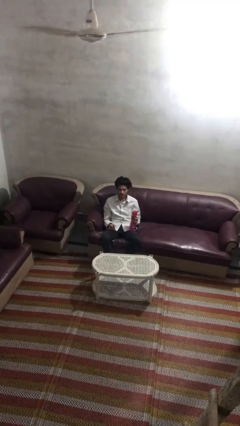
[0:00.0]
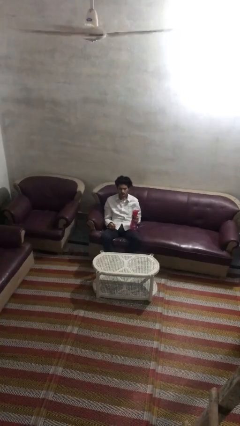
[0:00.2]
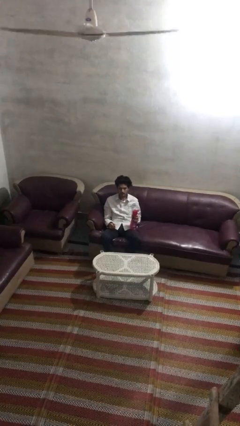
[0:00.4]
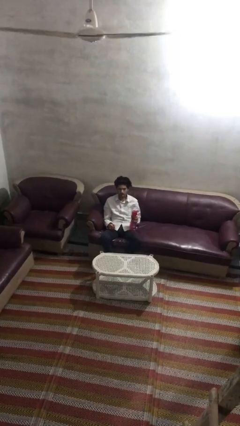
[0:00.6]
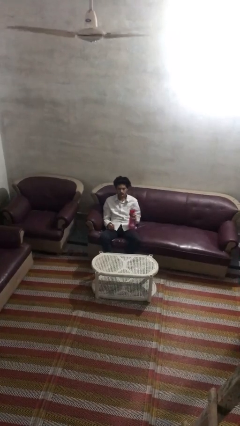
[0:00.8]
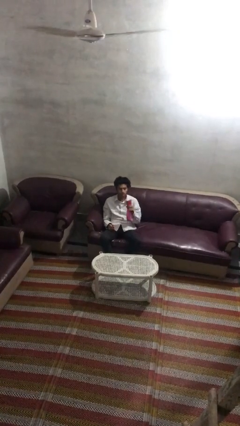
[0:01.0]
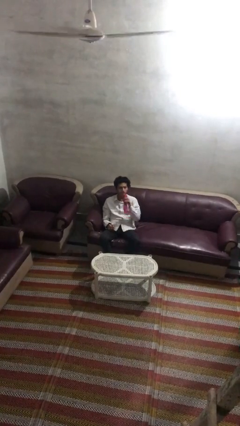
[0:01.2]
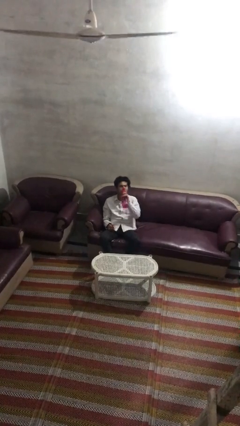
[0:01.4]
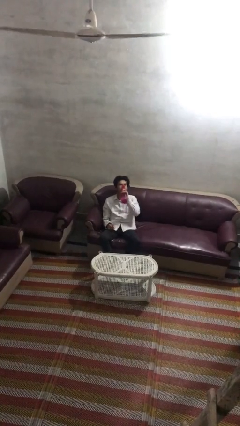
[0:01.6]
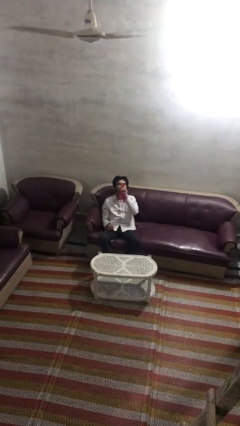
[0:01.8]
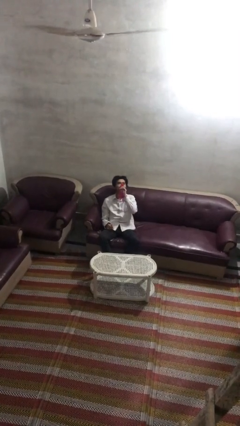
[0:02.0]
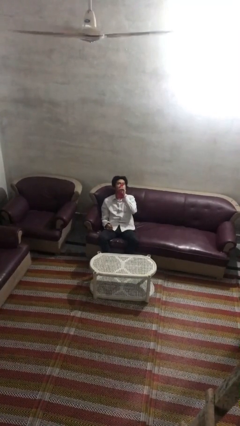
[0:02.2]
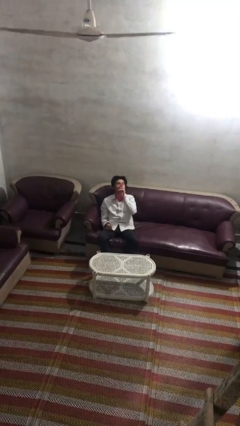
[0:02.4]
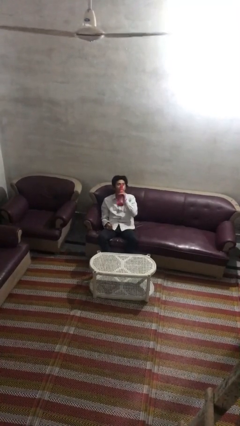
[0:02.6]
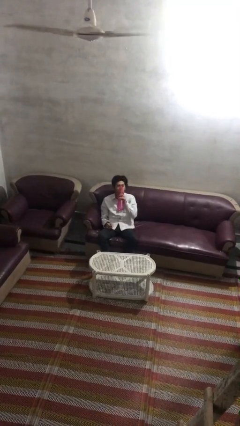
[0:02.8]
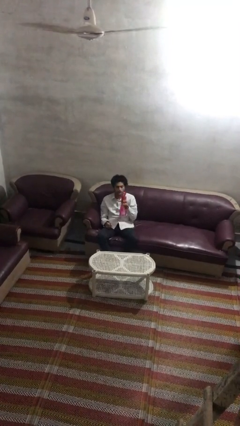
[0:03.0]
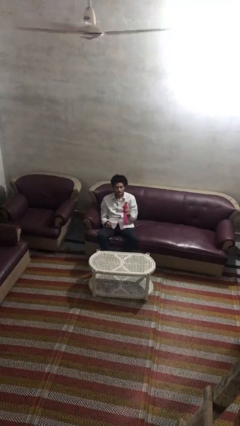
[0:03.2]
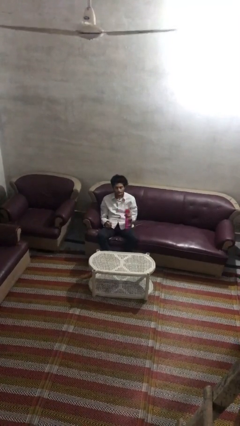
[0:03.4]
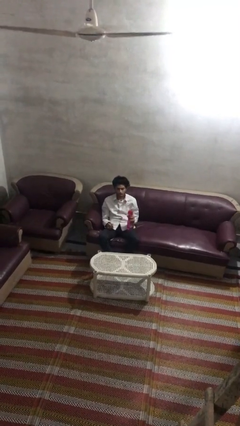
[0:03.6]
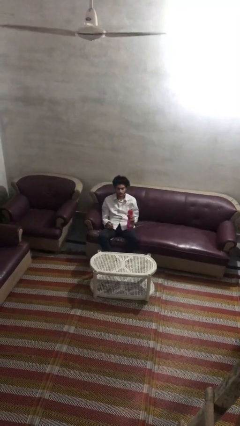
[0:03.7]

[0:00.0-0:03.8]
person drinks from bottle

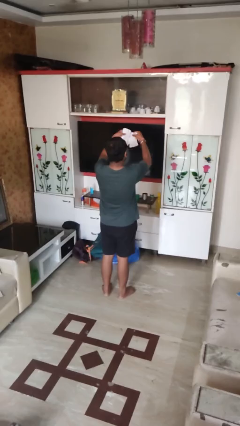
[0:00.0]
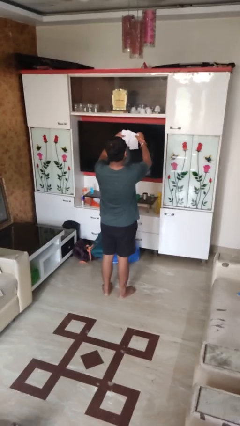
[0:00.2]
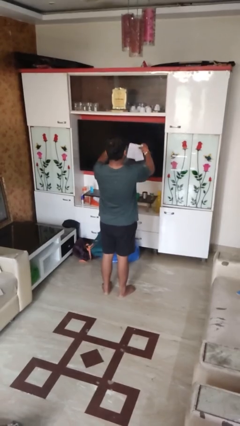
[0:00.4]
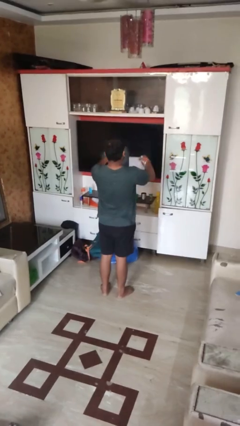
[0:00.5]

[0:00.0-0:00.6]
person tears paper

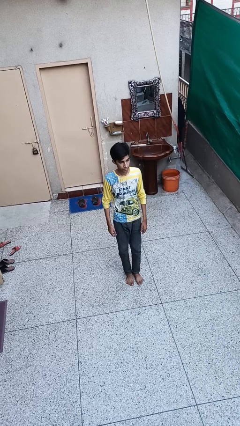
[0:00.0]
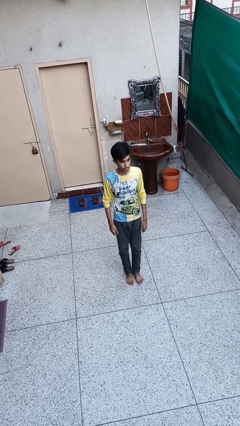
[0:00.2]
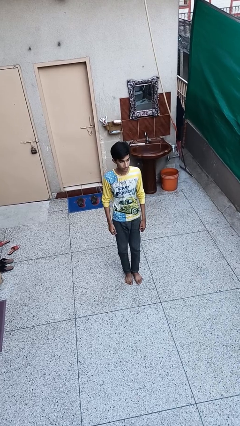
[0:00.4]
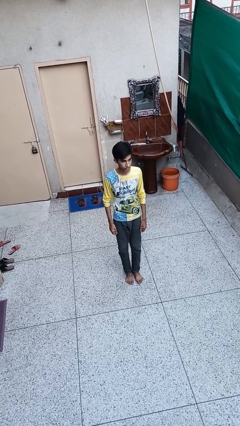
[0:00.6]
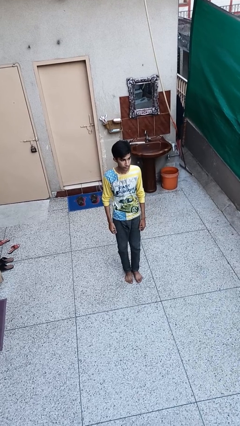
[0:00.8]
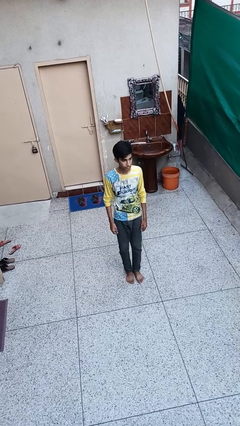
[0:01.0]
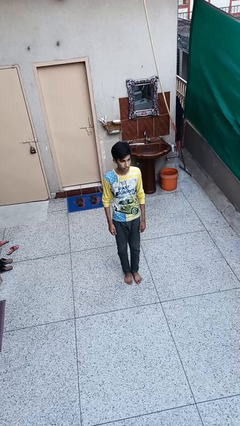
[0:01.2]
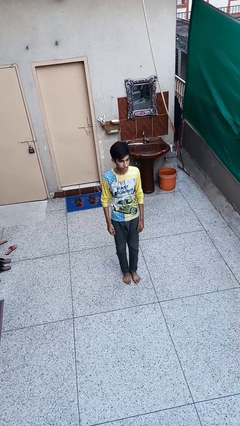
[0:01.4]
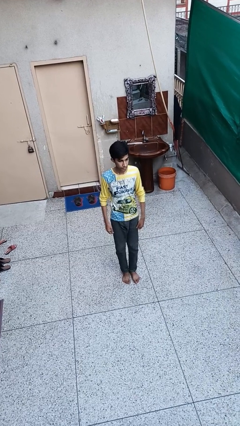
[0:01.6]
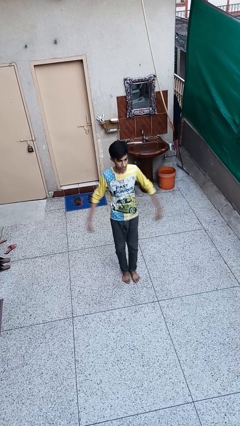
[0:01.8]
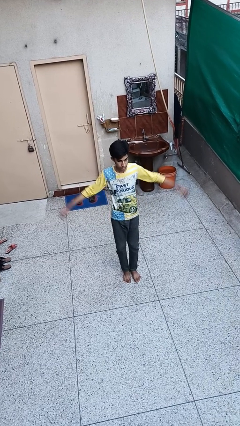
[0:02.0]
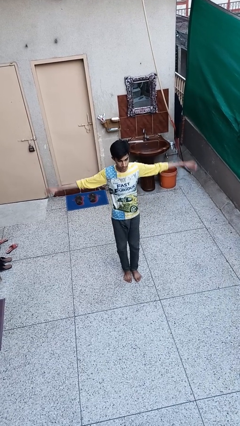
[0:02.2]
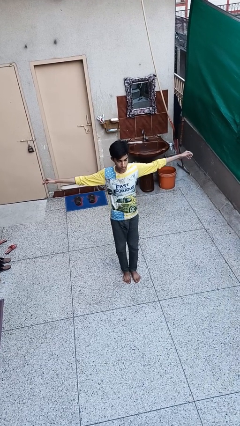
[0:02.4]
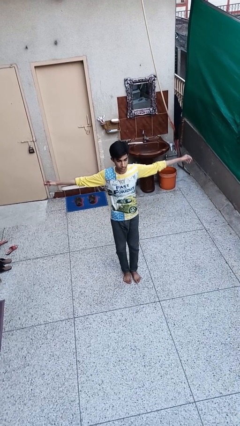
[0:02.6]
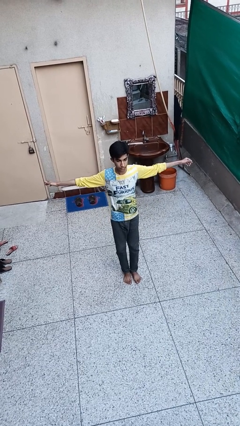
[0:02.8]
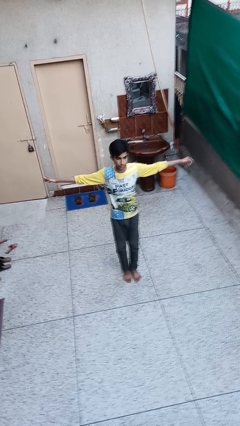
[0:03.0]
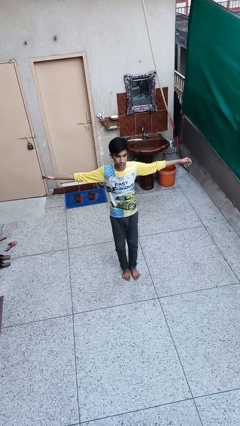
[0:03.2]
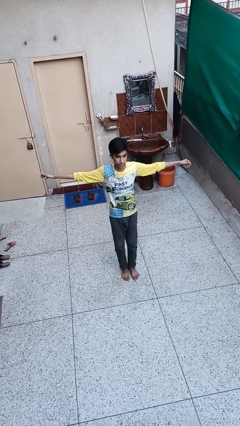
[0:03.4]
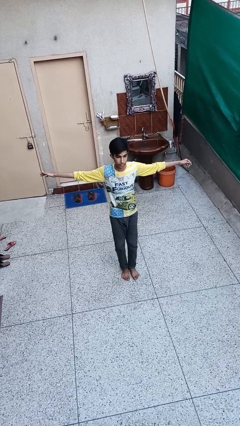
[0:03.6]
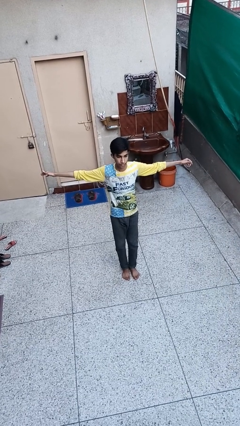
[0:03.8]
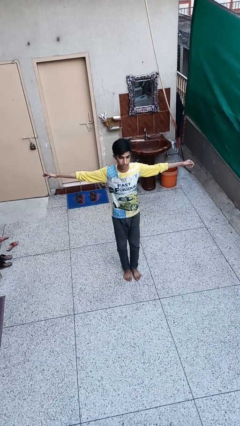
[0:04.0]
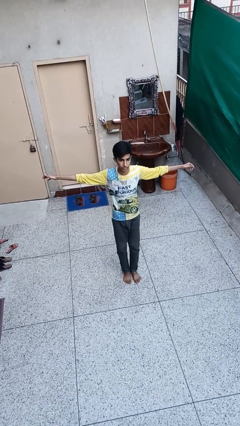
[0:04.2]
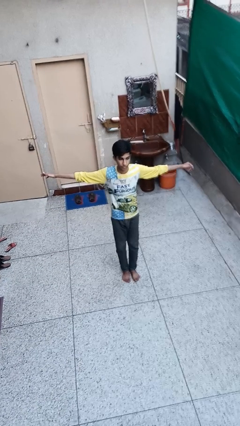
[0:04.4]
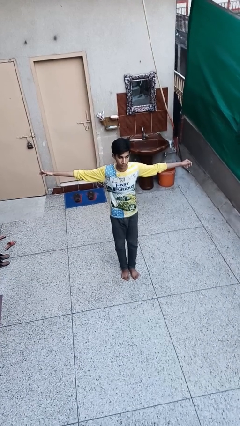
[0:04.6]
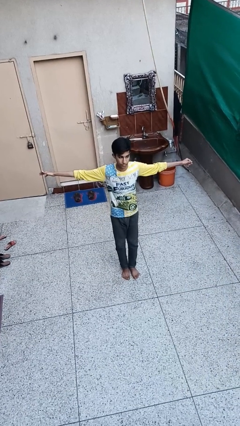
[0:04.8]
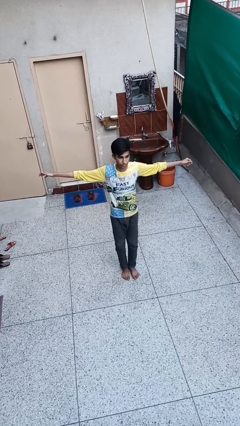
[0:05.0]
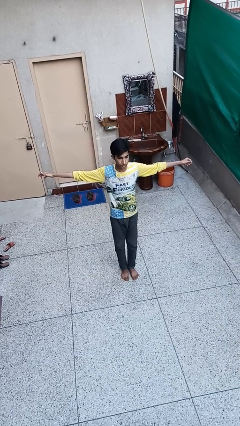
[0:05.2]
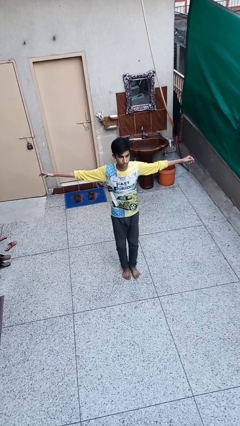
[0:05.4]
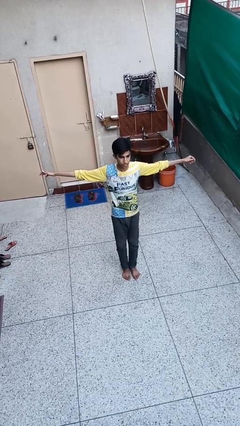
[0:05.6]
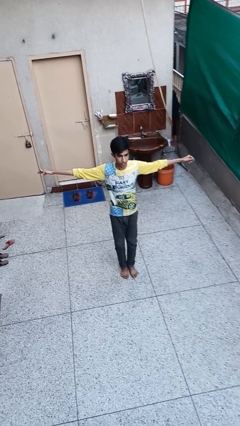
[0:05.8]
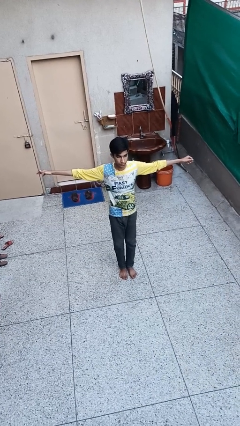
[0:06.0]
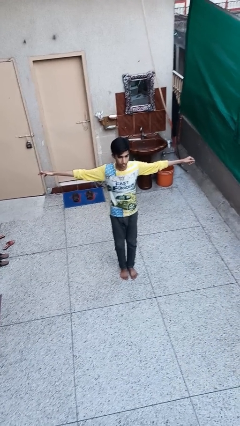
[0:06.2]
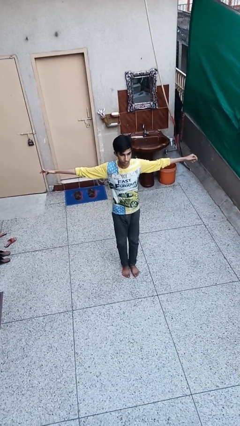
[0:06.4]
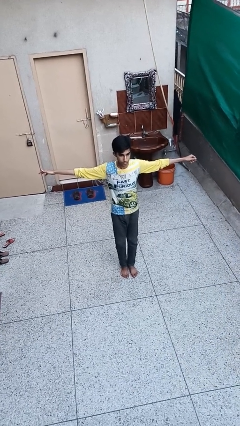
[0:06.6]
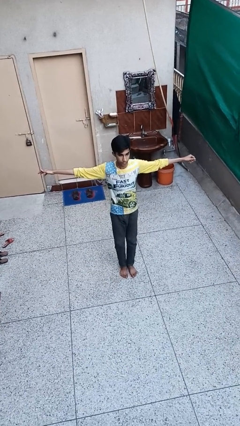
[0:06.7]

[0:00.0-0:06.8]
person stretches arms to side

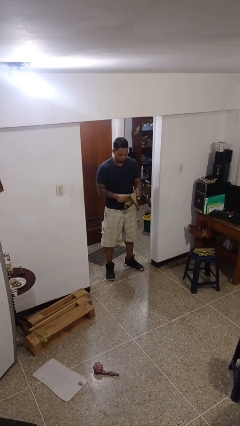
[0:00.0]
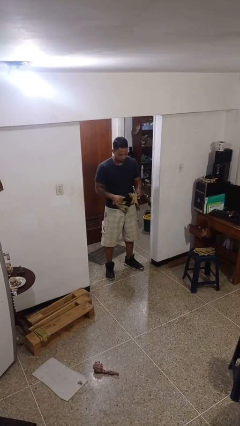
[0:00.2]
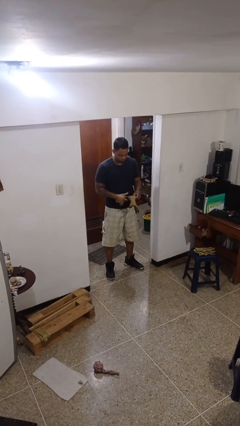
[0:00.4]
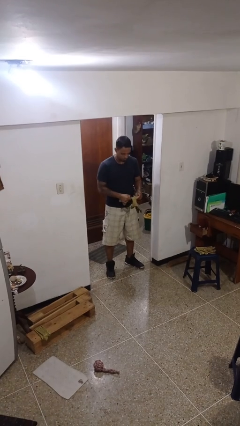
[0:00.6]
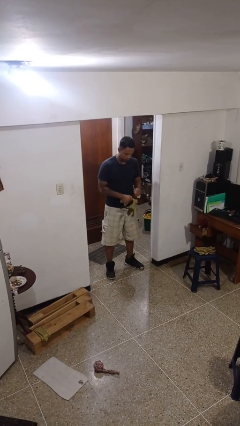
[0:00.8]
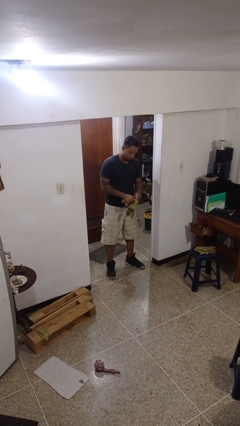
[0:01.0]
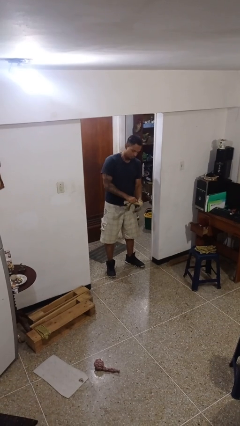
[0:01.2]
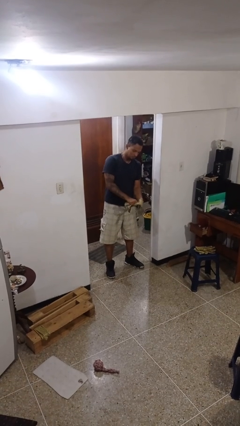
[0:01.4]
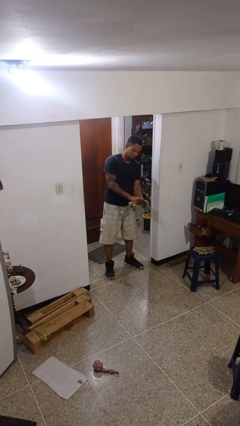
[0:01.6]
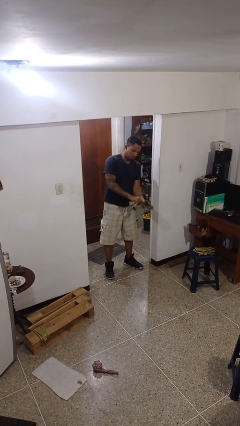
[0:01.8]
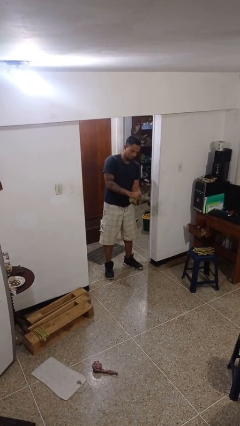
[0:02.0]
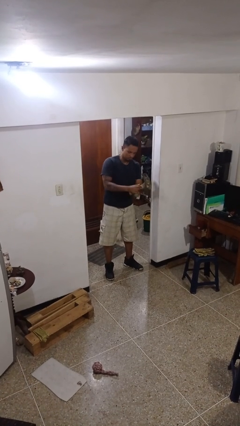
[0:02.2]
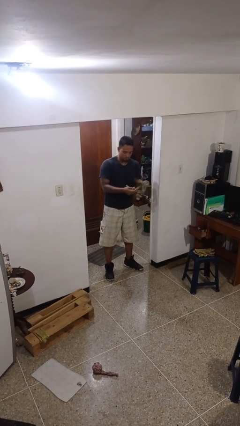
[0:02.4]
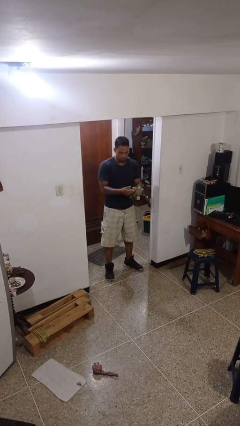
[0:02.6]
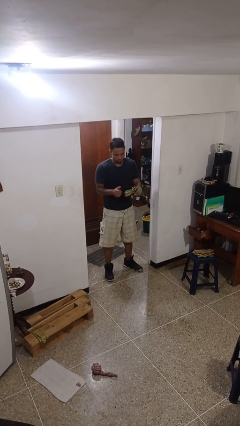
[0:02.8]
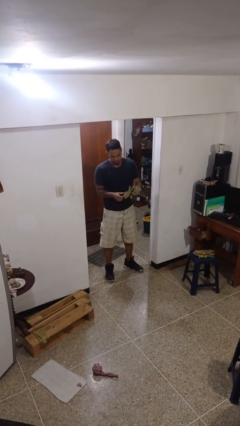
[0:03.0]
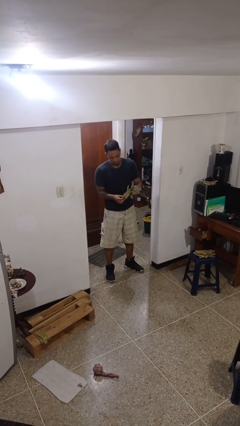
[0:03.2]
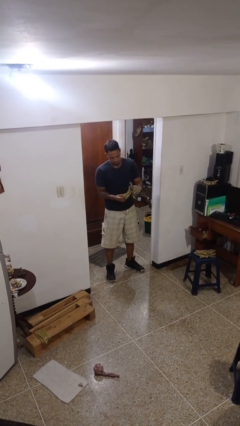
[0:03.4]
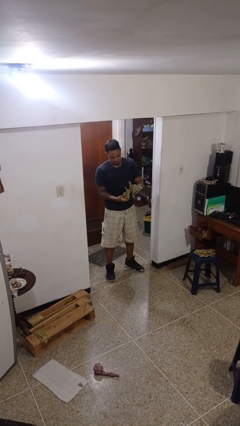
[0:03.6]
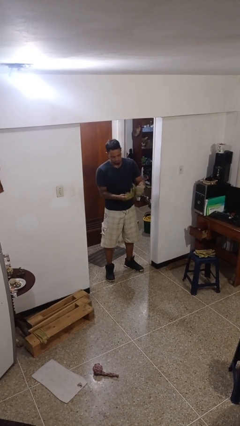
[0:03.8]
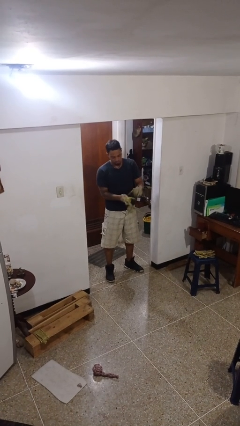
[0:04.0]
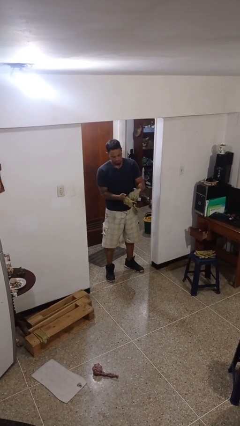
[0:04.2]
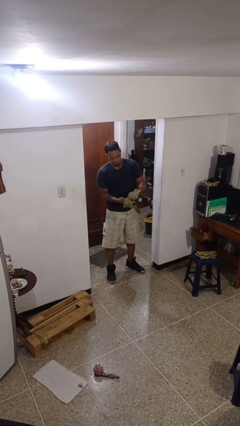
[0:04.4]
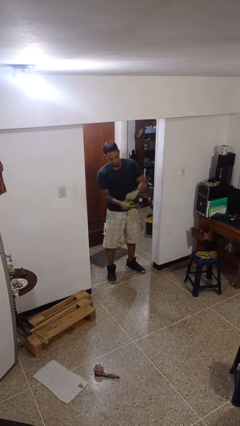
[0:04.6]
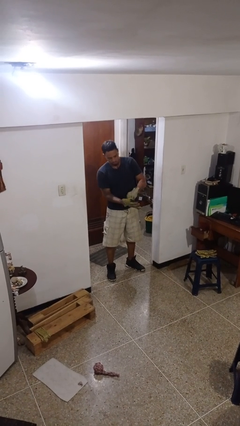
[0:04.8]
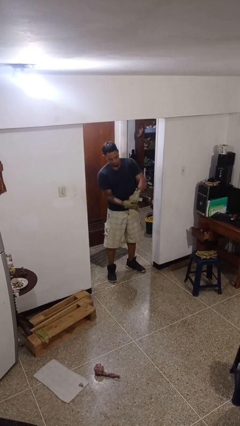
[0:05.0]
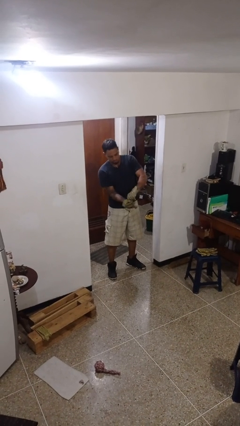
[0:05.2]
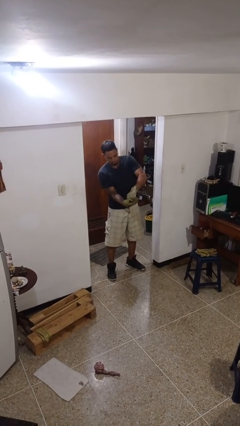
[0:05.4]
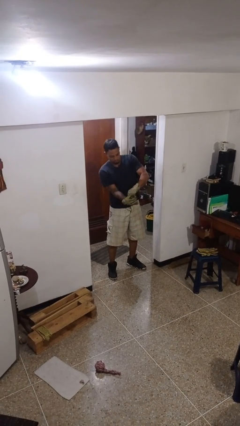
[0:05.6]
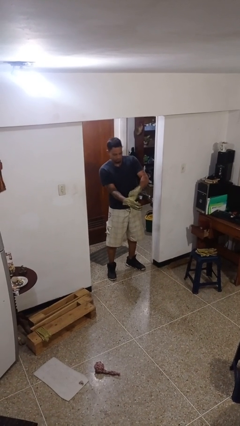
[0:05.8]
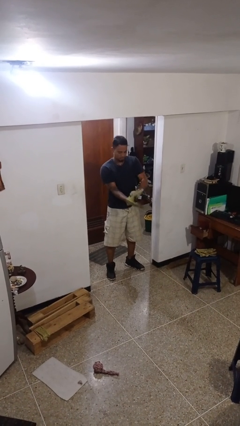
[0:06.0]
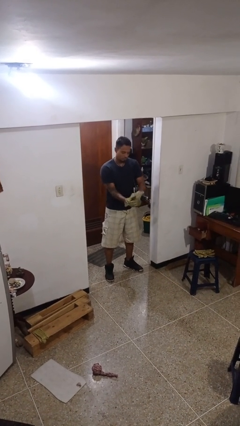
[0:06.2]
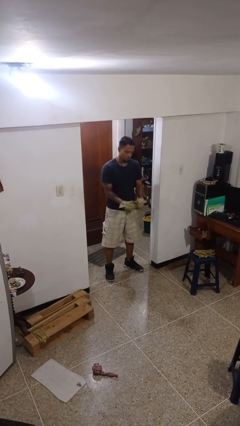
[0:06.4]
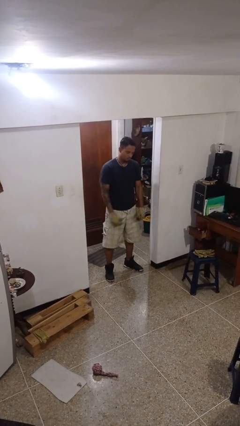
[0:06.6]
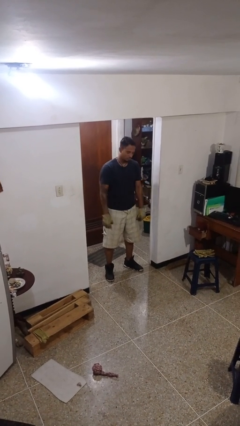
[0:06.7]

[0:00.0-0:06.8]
person puts on gloves
